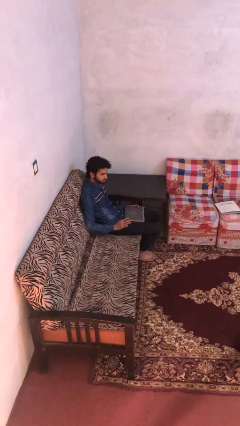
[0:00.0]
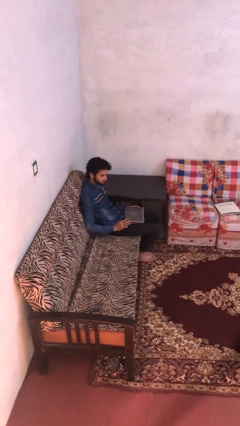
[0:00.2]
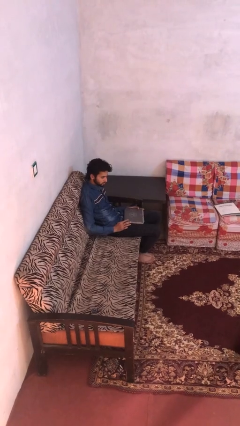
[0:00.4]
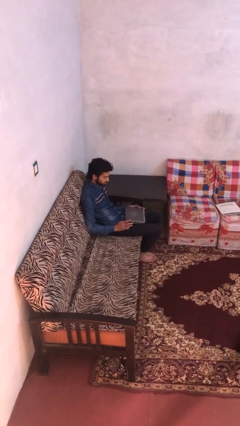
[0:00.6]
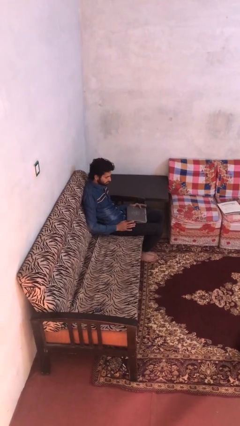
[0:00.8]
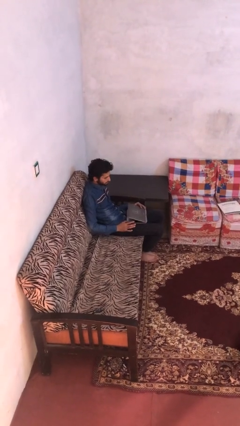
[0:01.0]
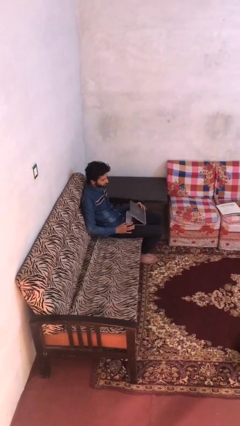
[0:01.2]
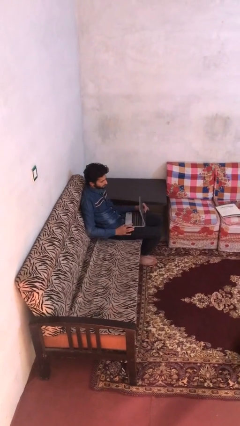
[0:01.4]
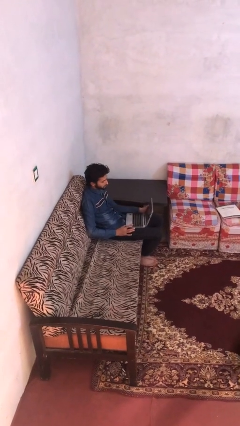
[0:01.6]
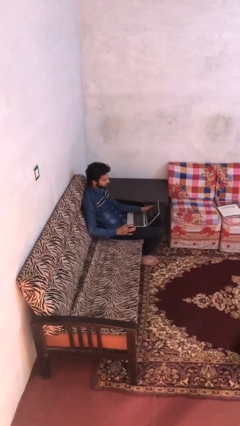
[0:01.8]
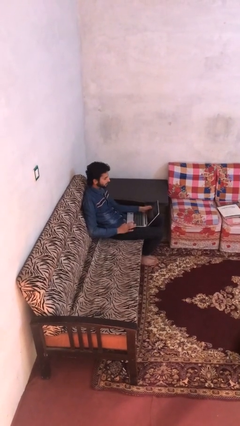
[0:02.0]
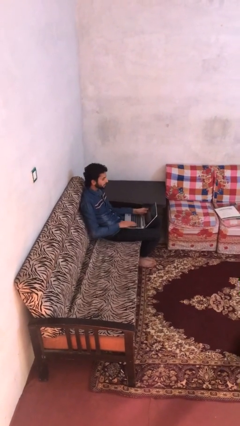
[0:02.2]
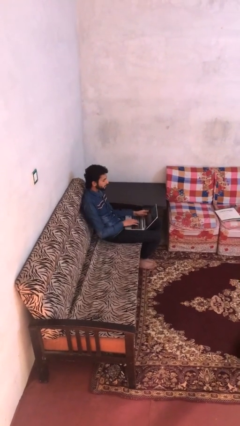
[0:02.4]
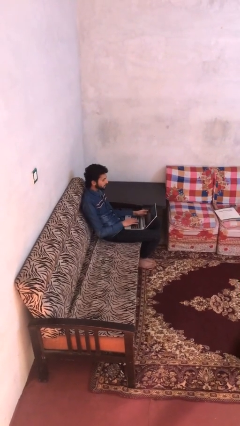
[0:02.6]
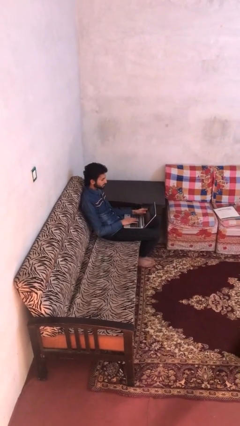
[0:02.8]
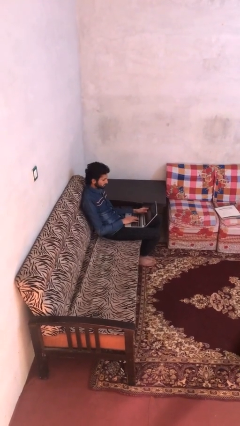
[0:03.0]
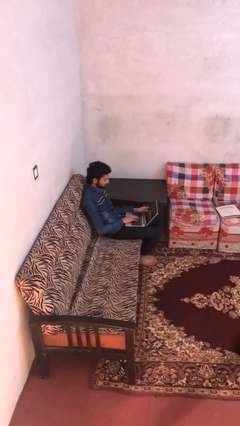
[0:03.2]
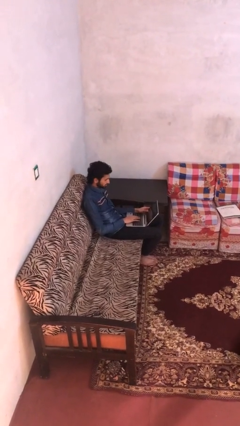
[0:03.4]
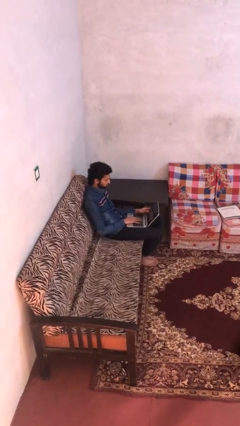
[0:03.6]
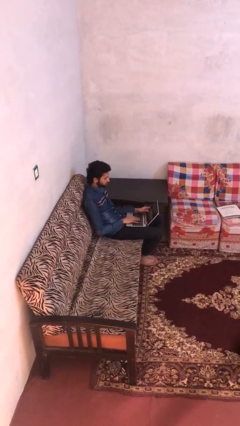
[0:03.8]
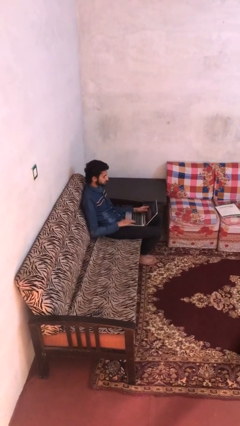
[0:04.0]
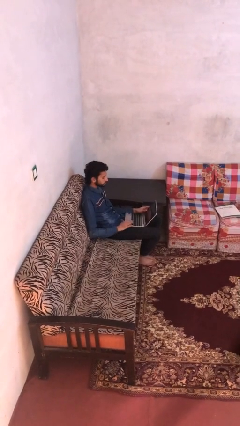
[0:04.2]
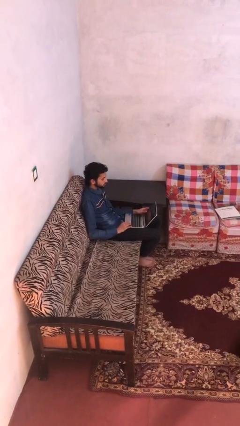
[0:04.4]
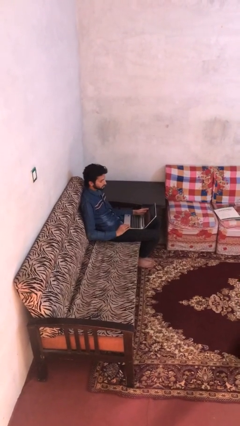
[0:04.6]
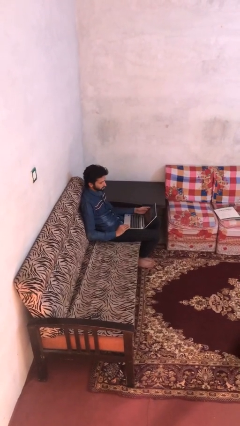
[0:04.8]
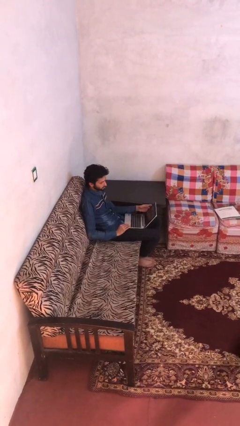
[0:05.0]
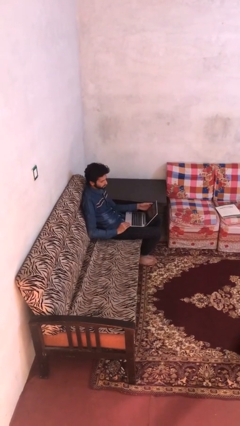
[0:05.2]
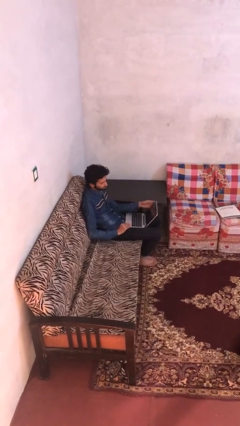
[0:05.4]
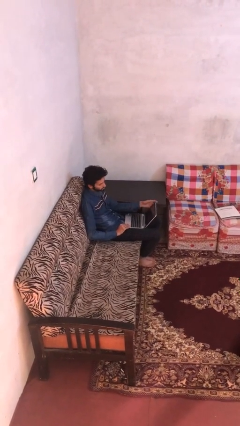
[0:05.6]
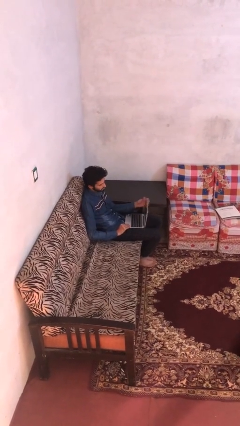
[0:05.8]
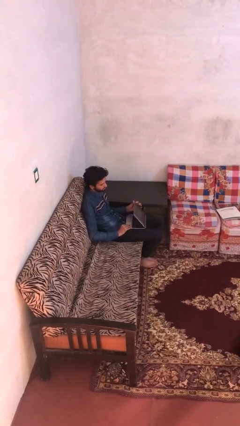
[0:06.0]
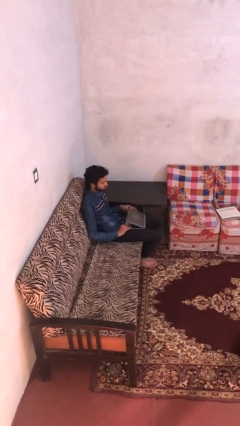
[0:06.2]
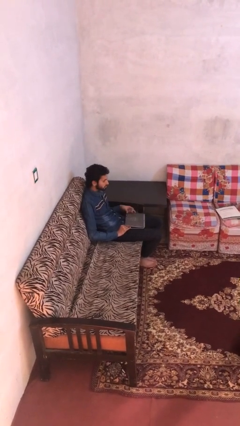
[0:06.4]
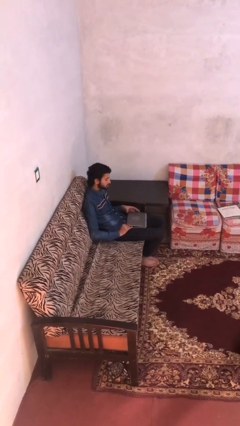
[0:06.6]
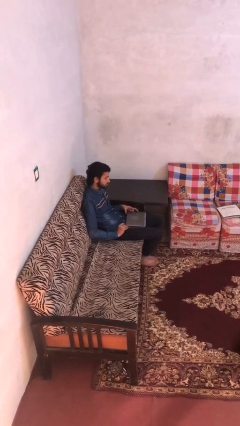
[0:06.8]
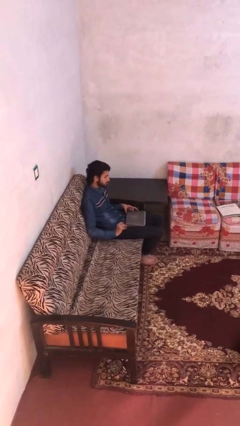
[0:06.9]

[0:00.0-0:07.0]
person interacts with laptop

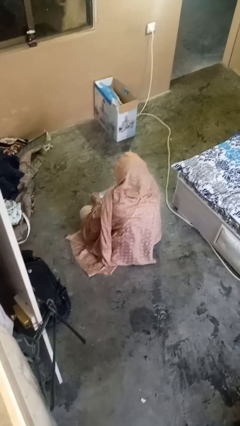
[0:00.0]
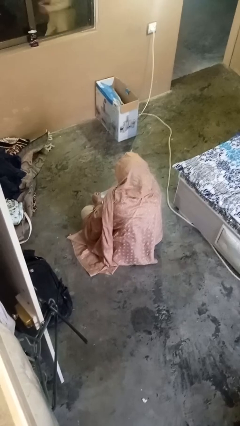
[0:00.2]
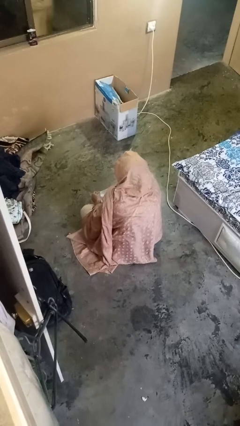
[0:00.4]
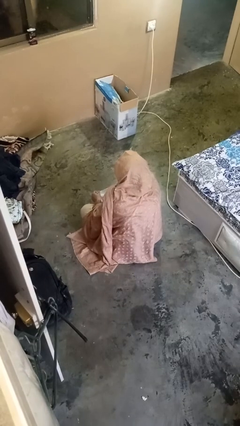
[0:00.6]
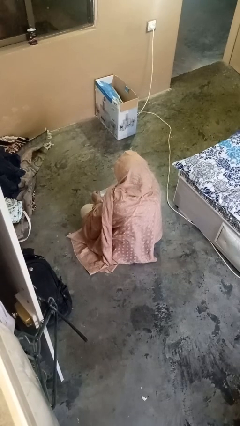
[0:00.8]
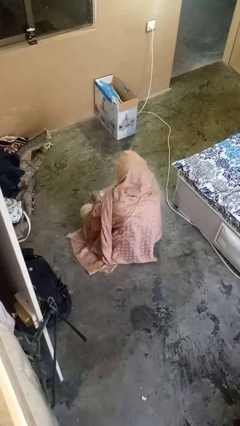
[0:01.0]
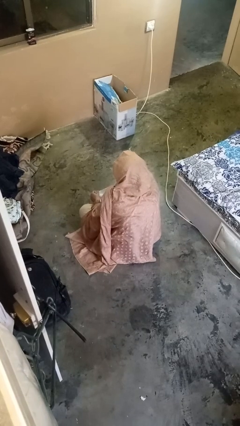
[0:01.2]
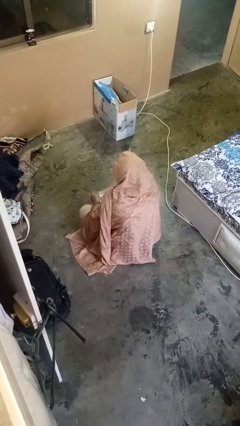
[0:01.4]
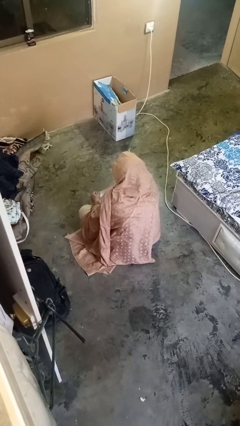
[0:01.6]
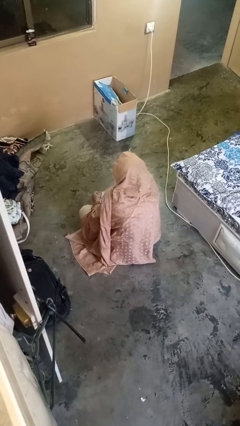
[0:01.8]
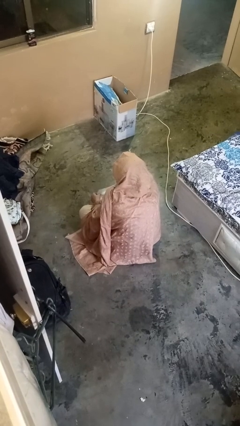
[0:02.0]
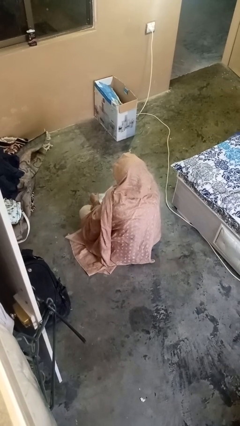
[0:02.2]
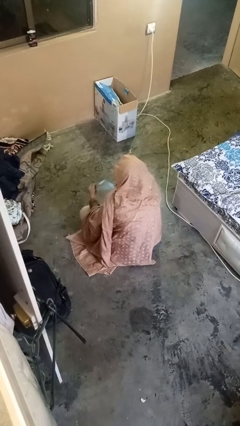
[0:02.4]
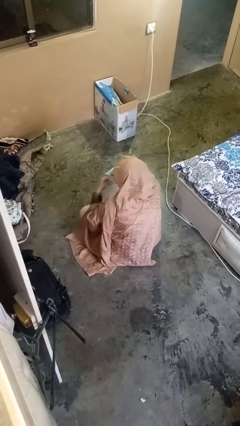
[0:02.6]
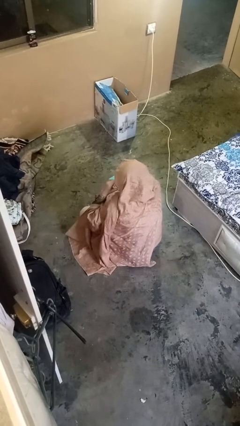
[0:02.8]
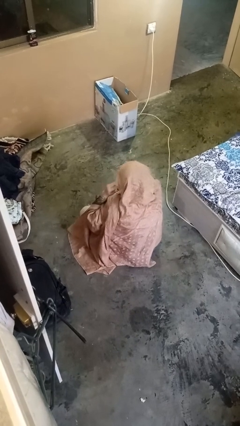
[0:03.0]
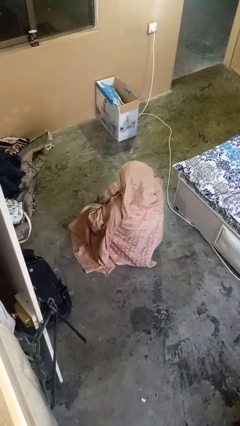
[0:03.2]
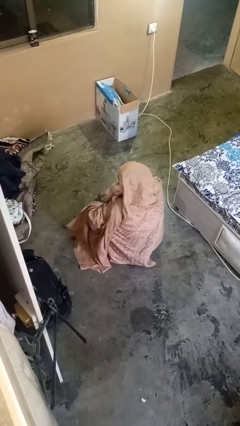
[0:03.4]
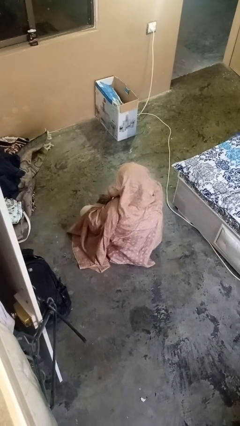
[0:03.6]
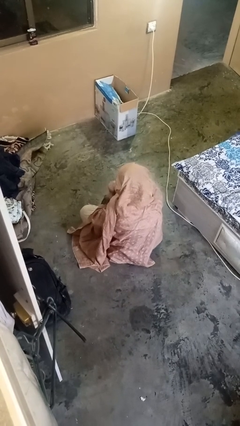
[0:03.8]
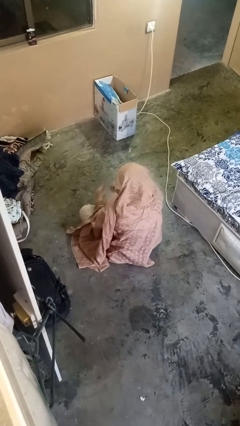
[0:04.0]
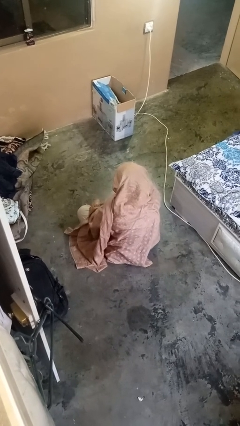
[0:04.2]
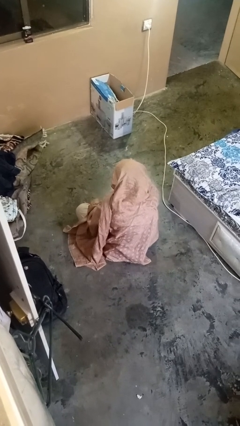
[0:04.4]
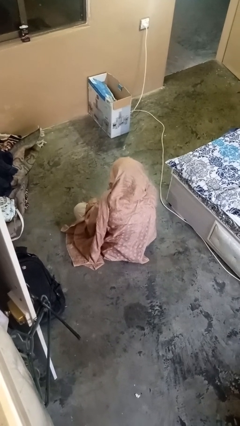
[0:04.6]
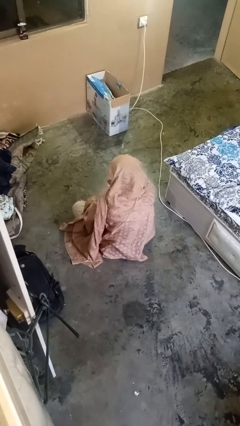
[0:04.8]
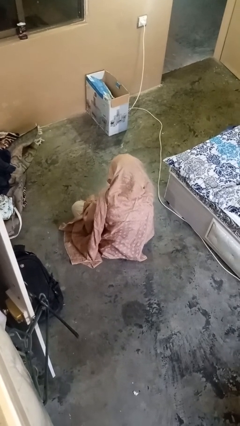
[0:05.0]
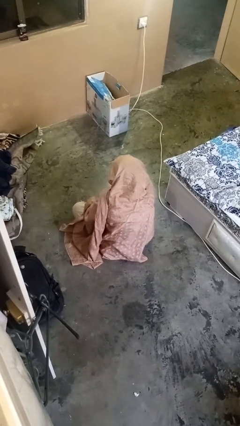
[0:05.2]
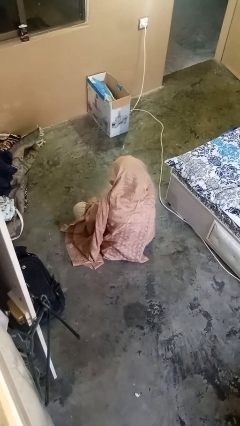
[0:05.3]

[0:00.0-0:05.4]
person puts on facemask

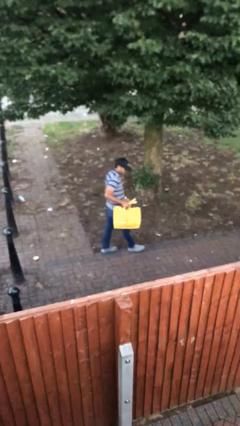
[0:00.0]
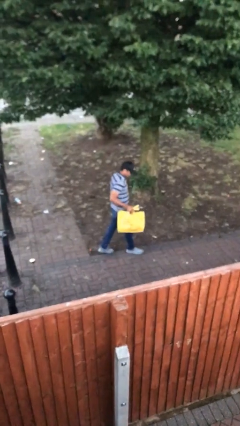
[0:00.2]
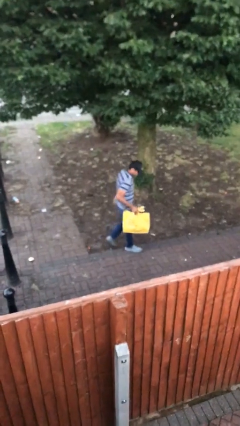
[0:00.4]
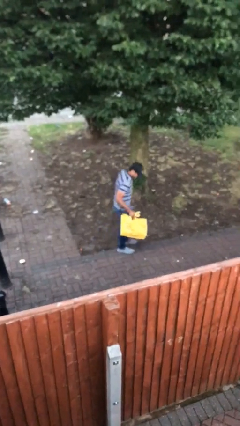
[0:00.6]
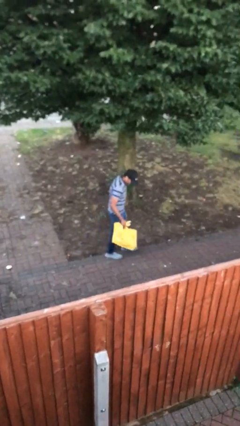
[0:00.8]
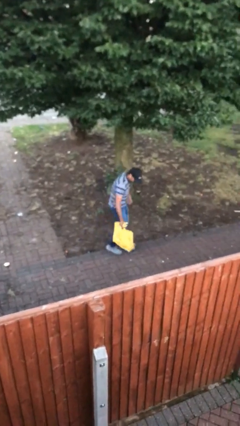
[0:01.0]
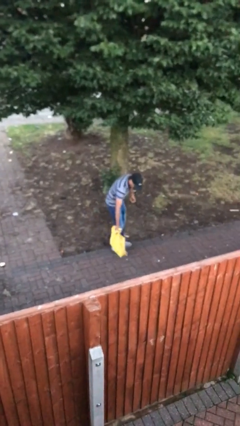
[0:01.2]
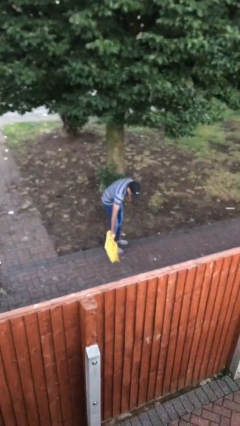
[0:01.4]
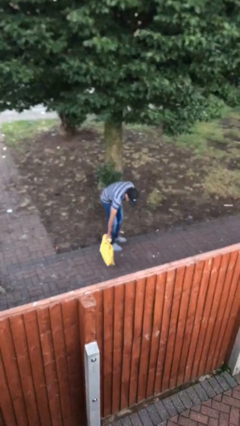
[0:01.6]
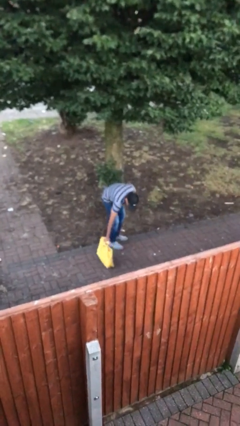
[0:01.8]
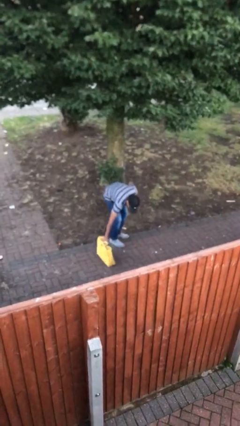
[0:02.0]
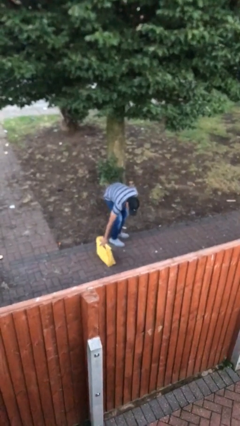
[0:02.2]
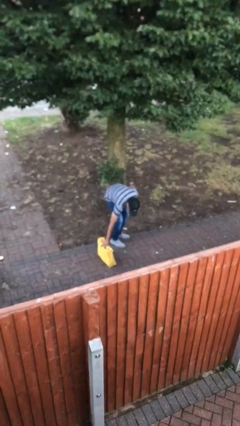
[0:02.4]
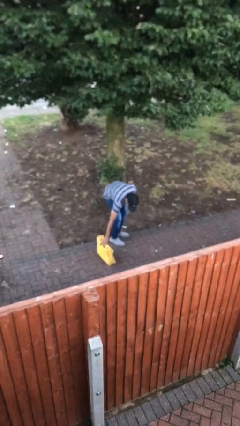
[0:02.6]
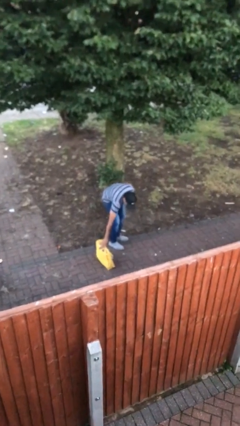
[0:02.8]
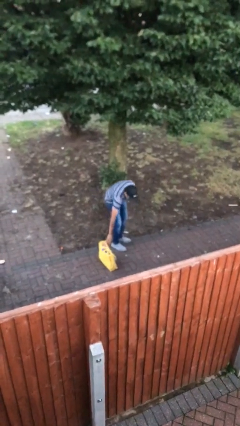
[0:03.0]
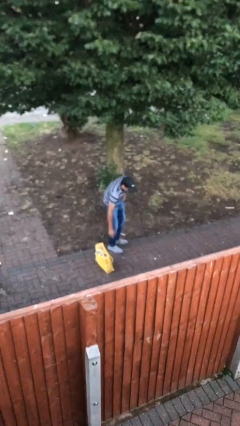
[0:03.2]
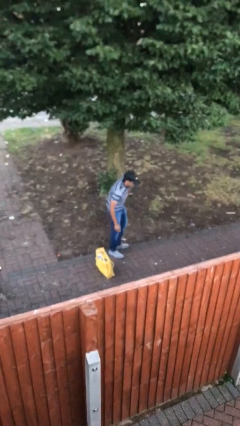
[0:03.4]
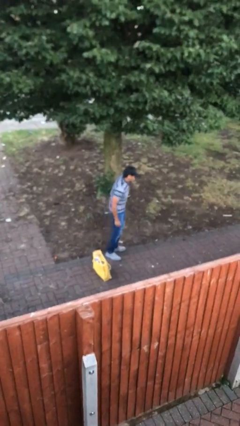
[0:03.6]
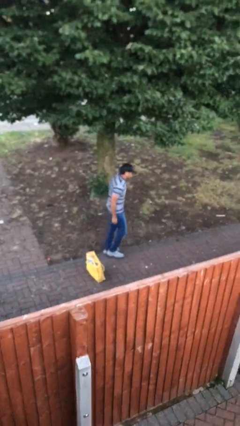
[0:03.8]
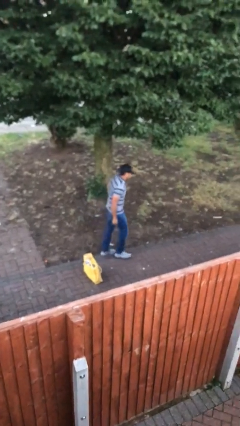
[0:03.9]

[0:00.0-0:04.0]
person puts down object on floor

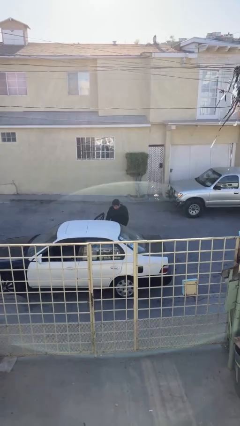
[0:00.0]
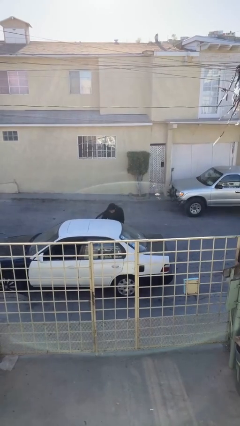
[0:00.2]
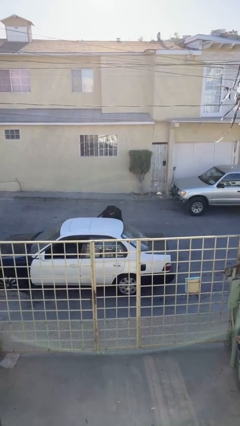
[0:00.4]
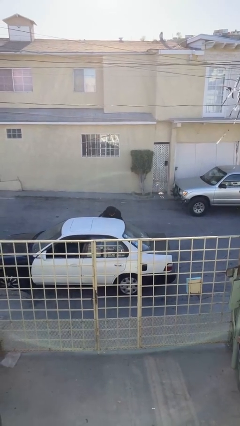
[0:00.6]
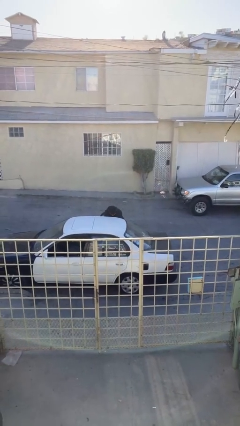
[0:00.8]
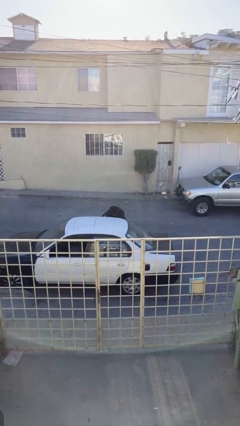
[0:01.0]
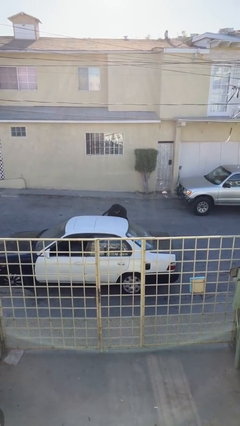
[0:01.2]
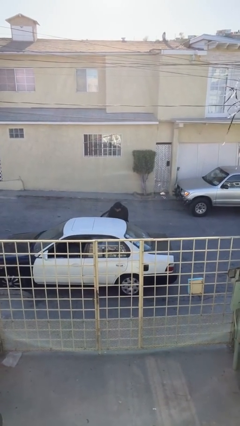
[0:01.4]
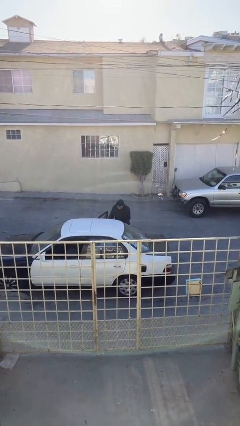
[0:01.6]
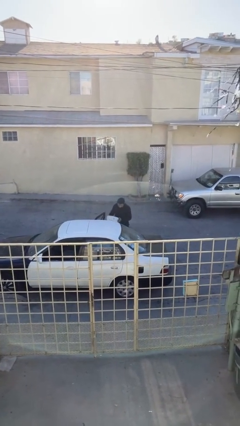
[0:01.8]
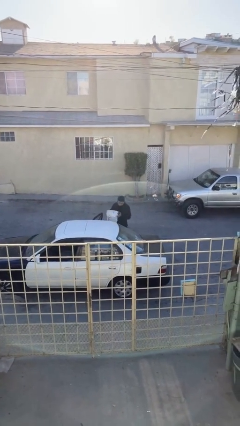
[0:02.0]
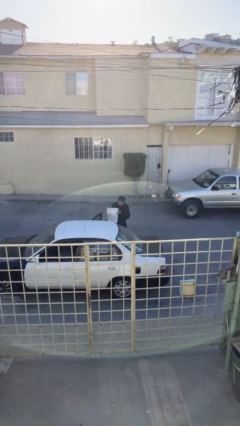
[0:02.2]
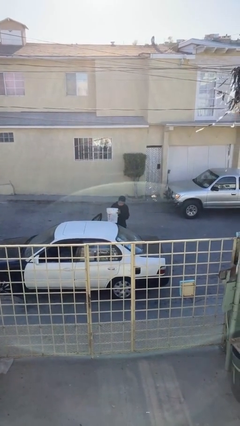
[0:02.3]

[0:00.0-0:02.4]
person unloads car
